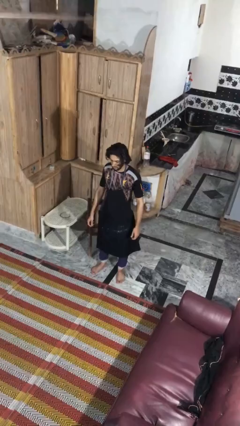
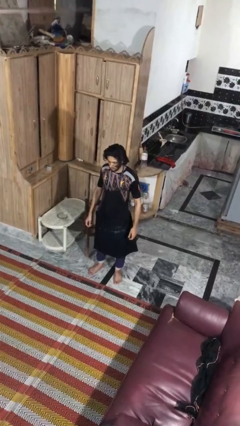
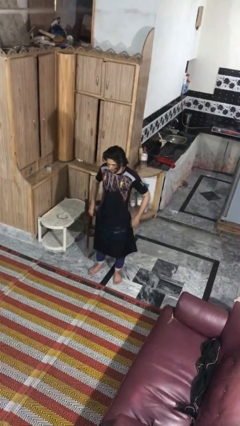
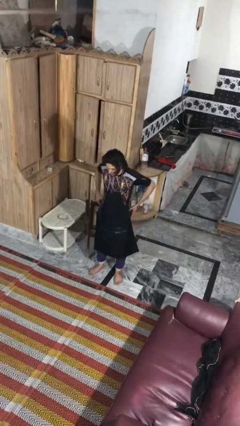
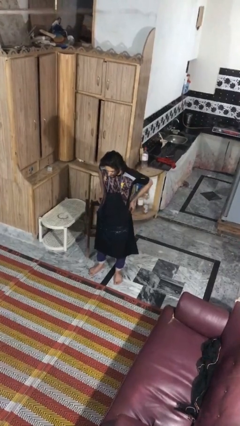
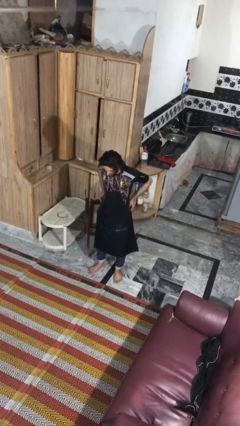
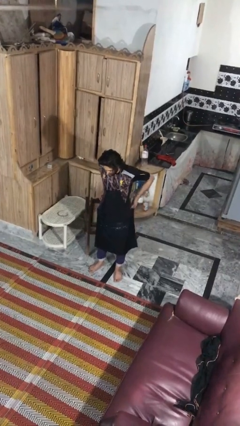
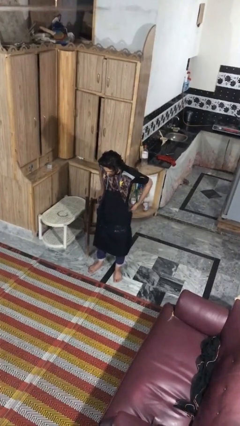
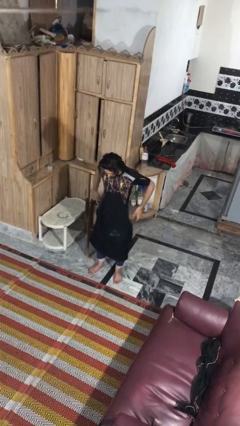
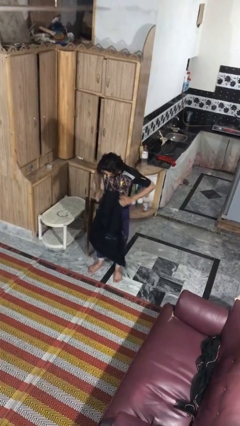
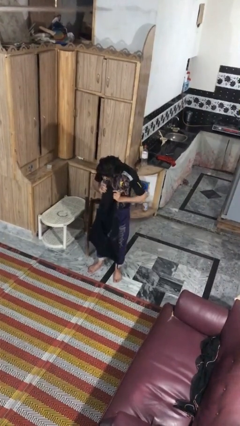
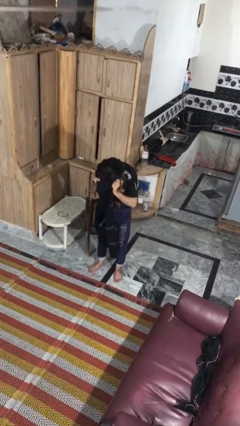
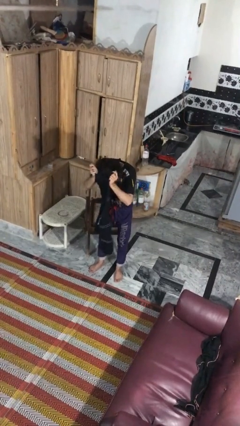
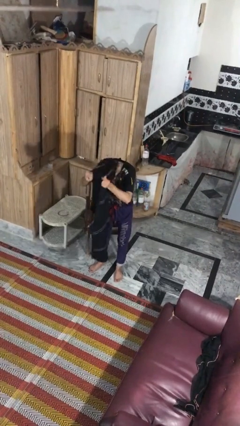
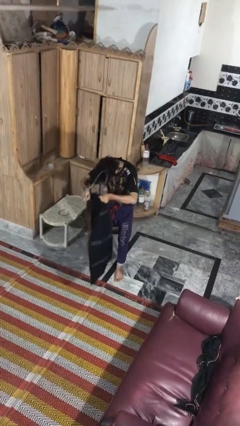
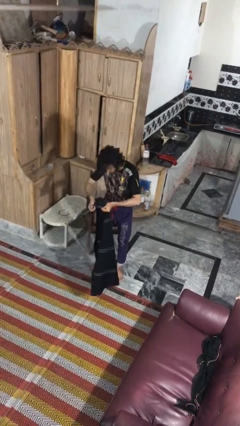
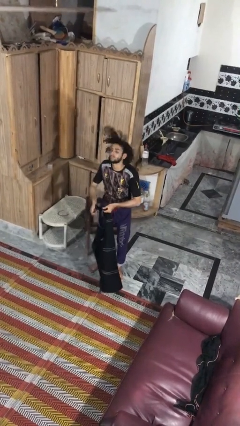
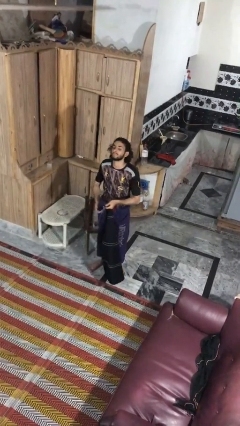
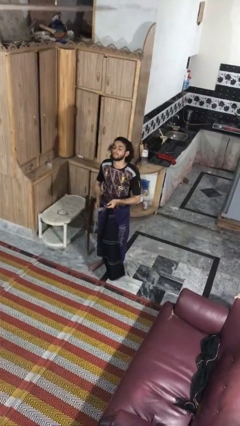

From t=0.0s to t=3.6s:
person takes off apron

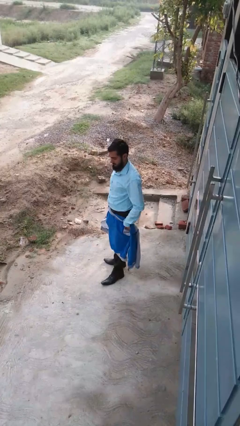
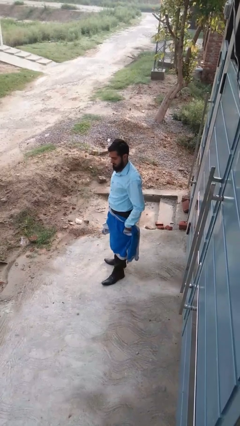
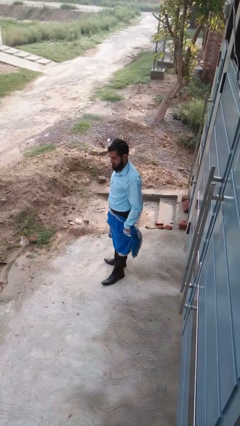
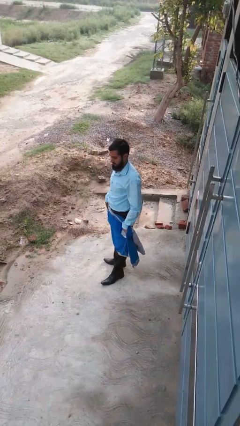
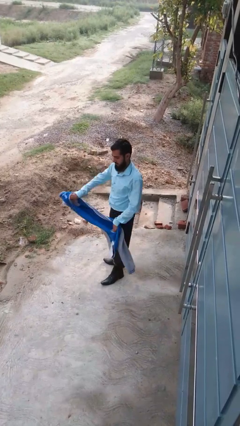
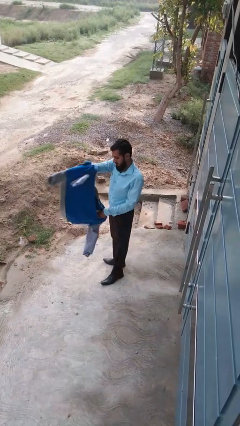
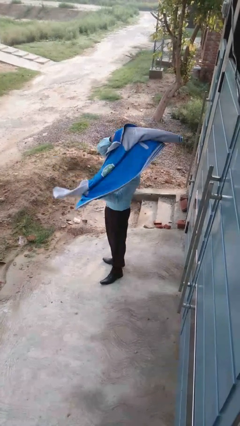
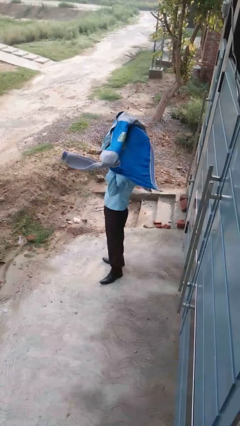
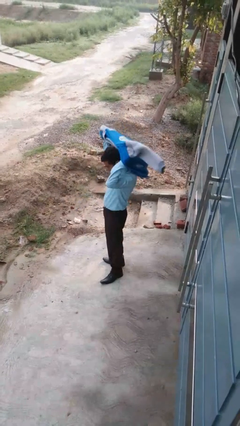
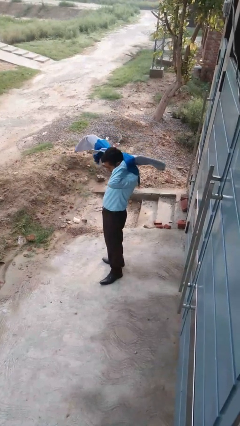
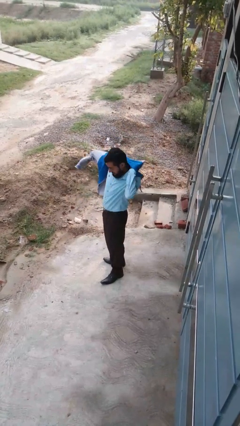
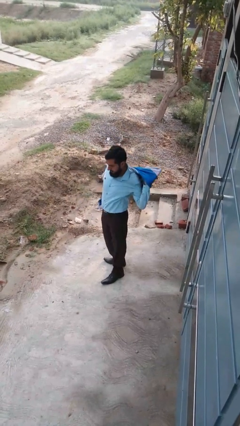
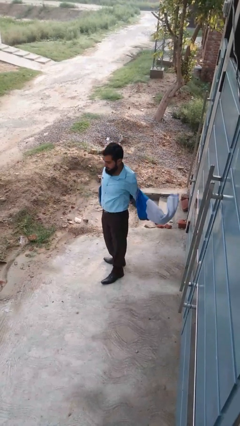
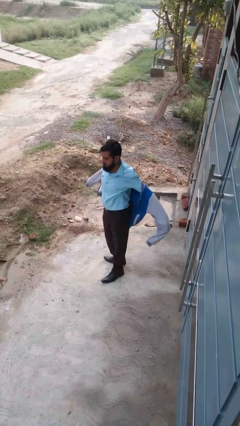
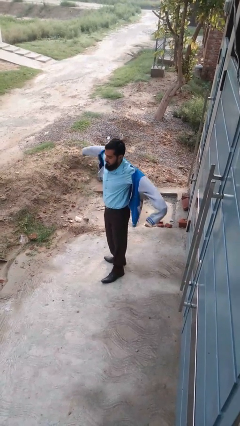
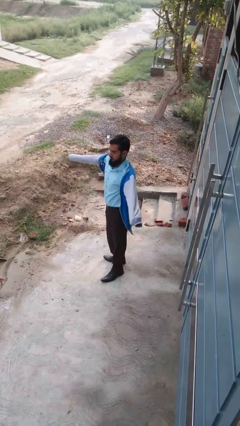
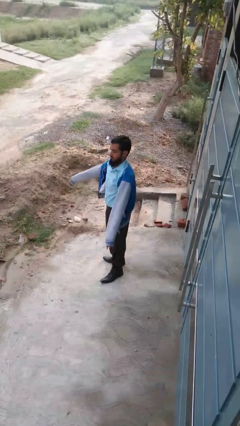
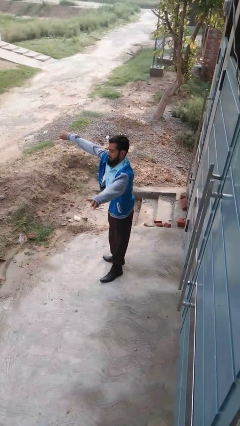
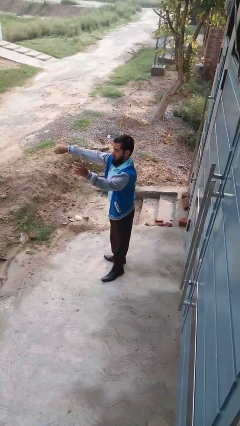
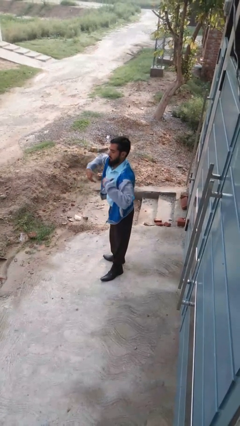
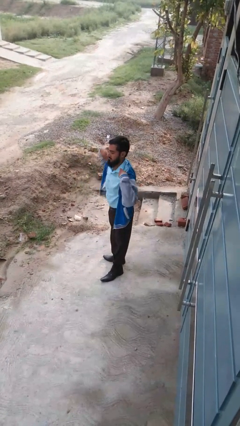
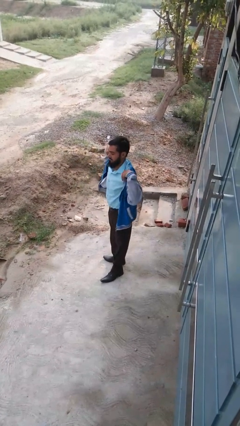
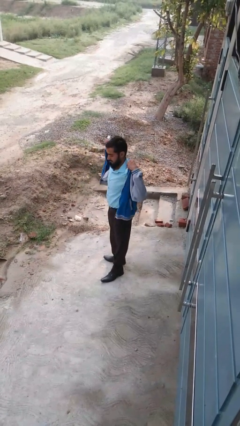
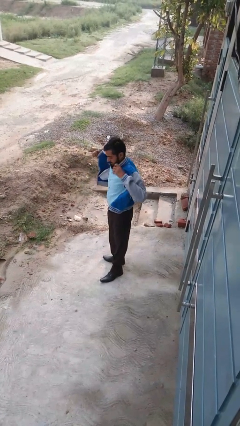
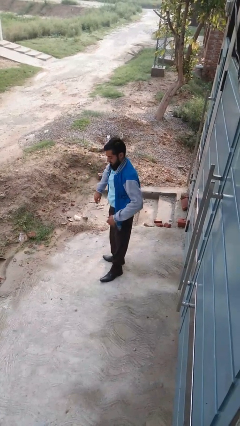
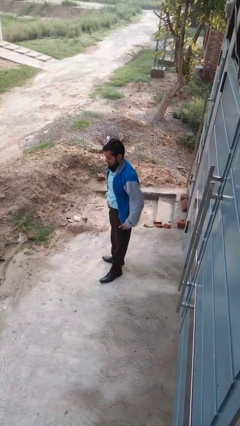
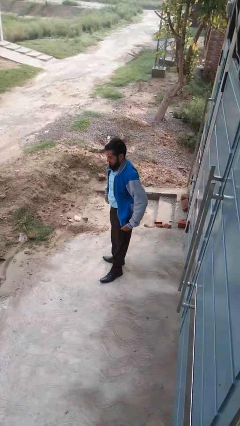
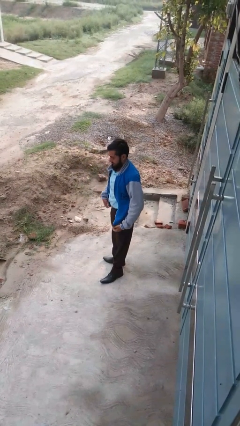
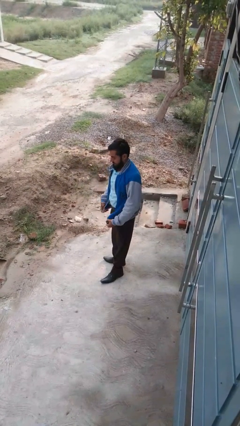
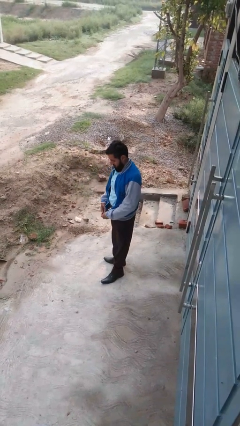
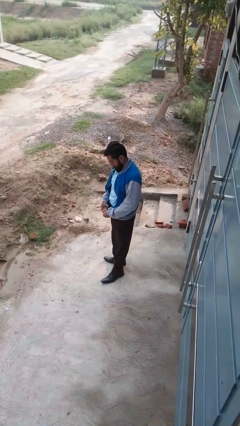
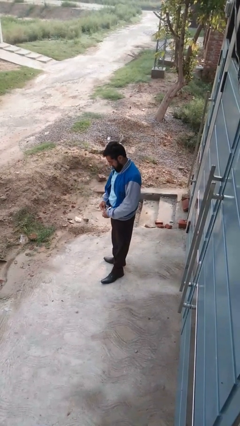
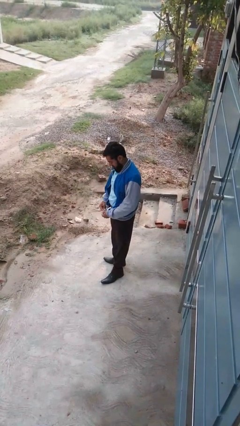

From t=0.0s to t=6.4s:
person puts on jacket

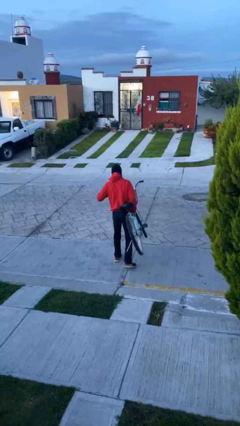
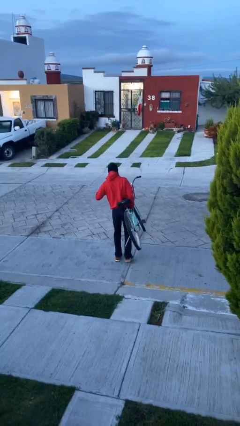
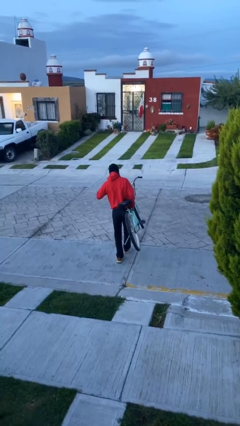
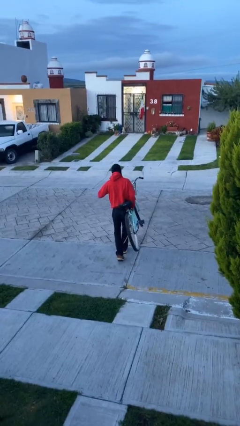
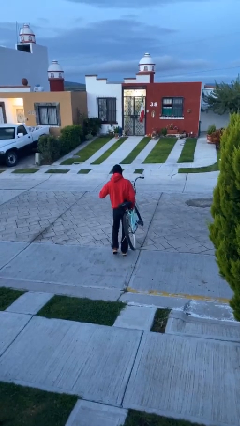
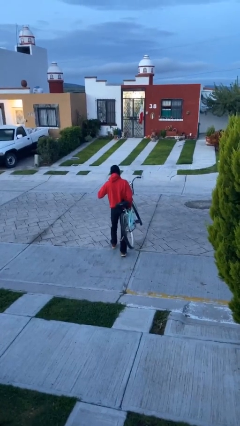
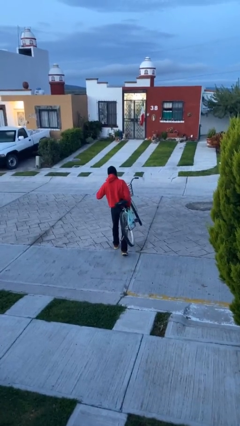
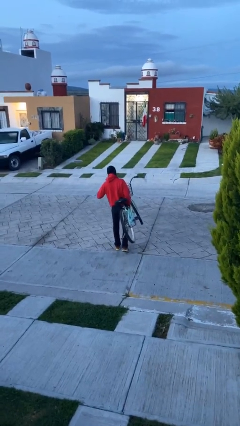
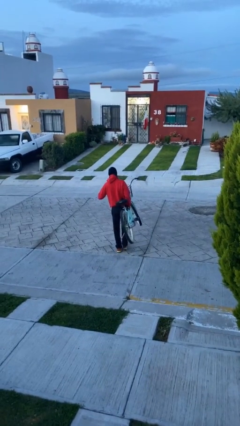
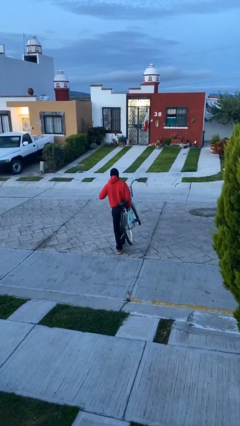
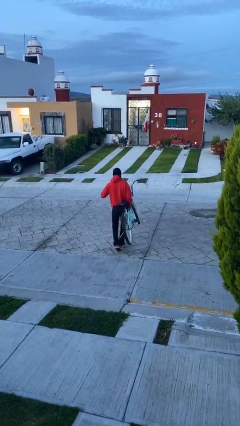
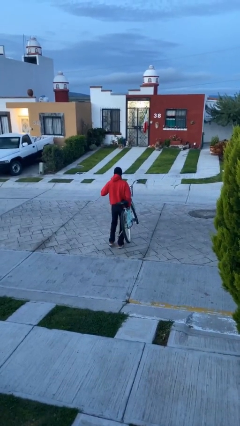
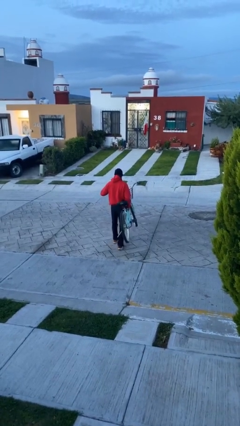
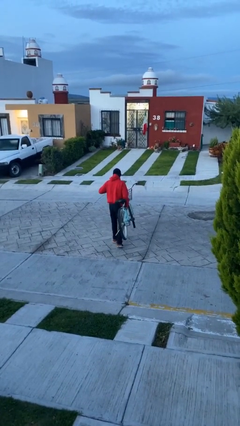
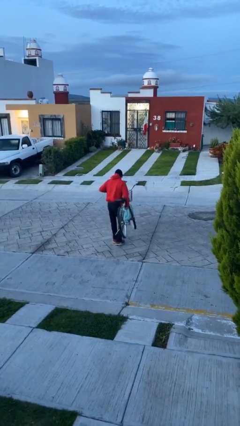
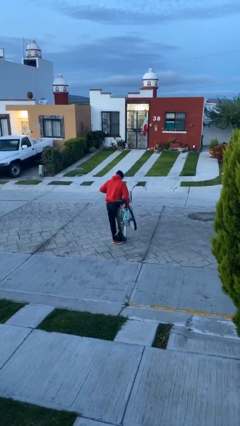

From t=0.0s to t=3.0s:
person carries heavy object

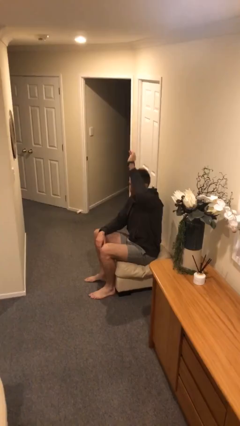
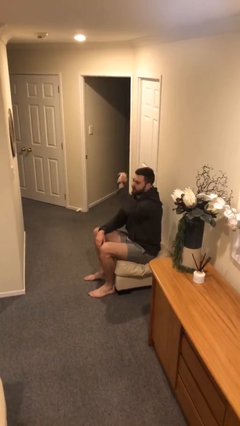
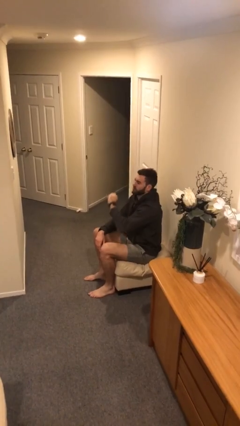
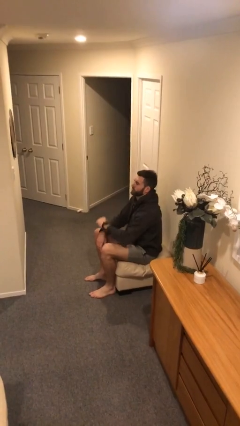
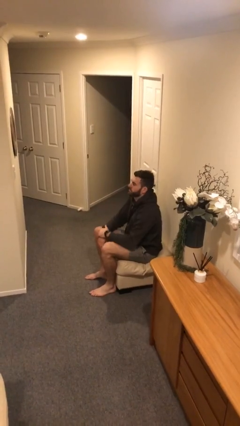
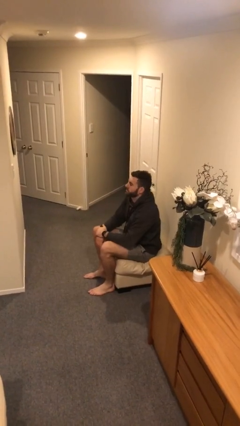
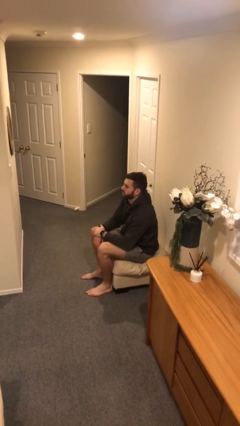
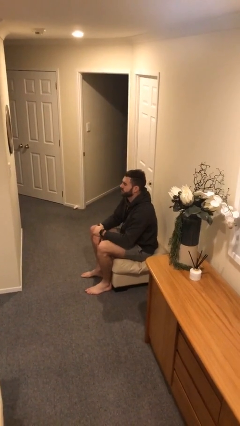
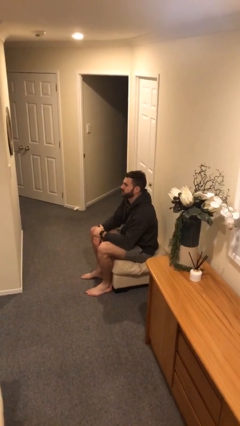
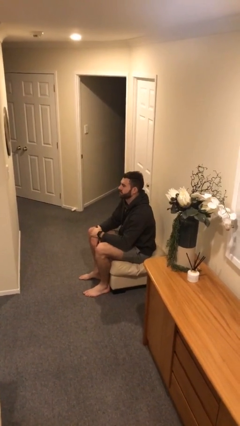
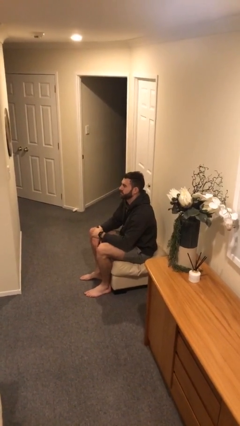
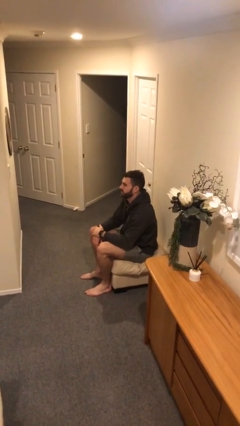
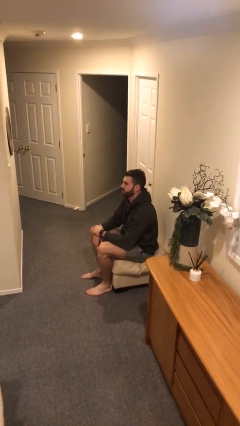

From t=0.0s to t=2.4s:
person gestures lower hand

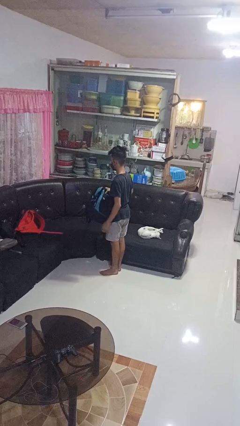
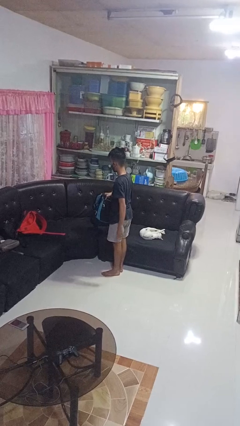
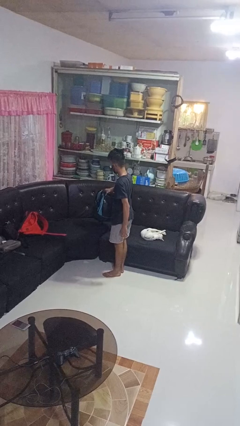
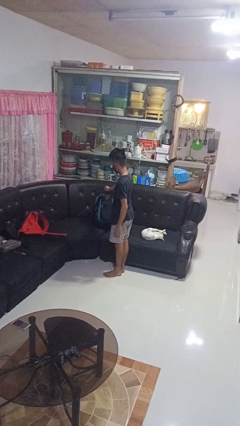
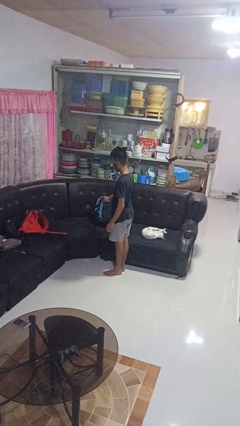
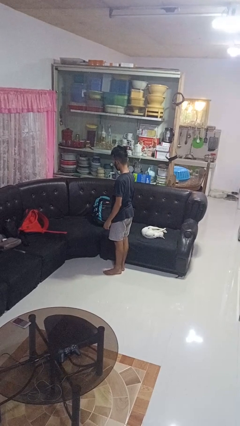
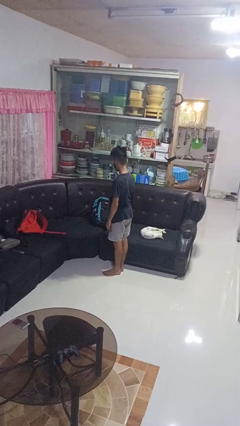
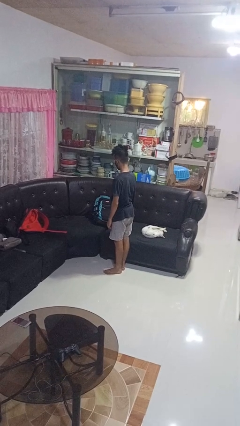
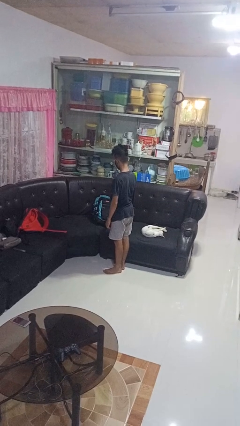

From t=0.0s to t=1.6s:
person puts down object on couch

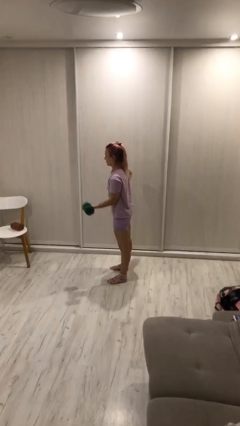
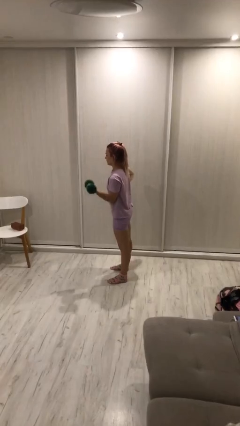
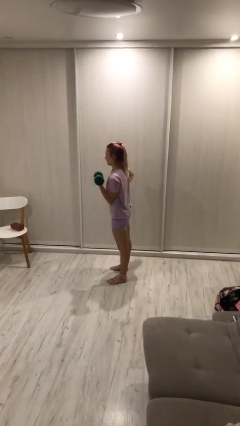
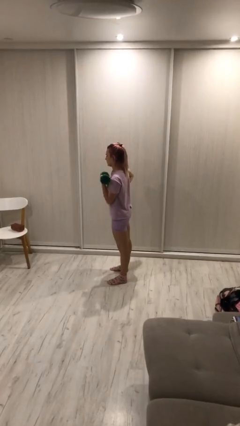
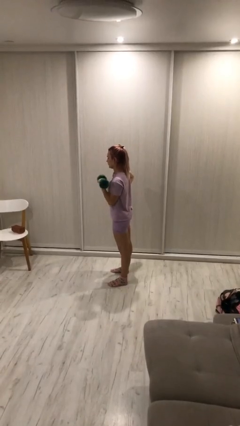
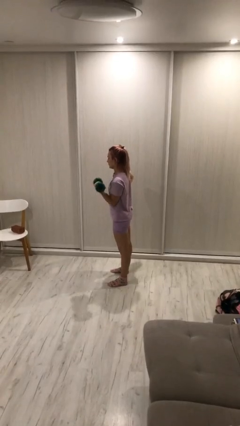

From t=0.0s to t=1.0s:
person lifts dumbbells
